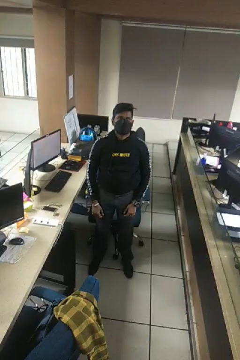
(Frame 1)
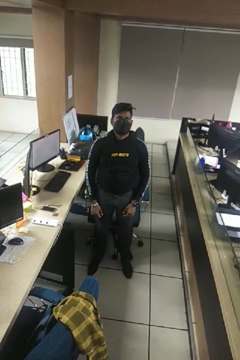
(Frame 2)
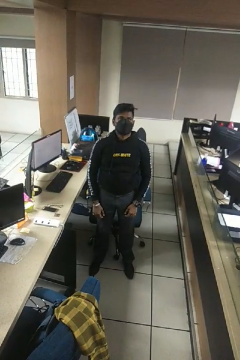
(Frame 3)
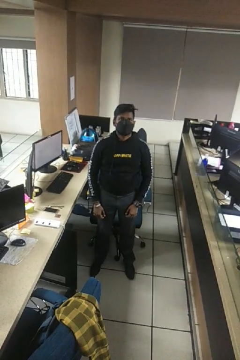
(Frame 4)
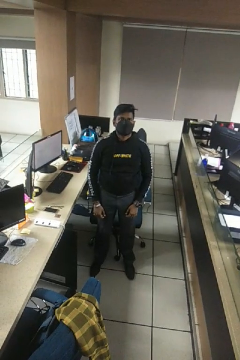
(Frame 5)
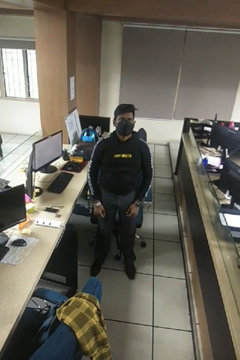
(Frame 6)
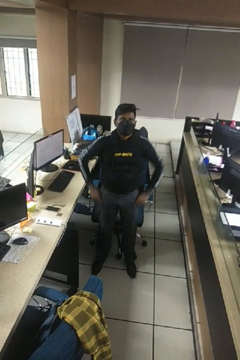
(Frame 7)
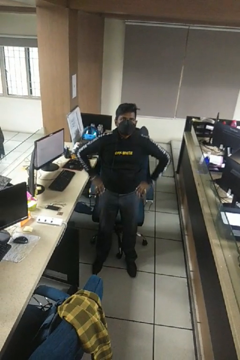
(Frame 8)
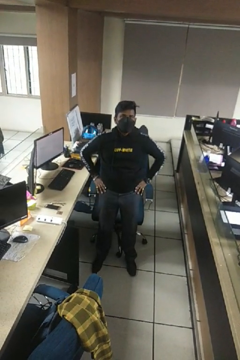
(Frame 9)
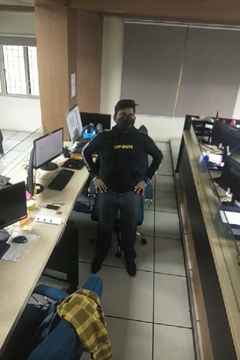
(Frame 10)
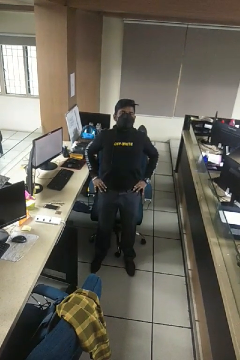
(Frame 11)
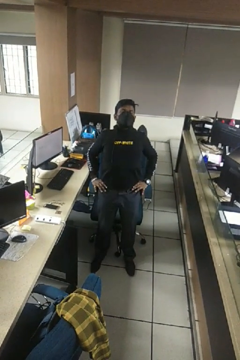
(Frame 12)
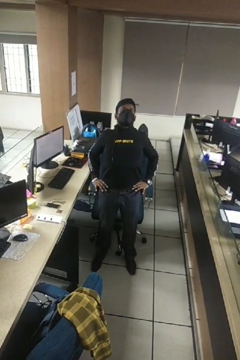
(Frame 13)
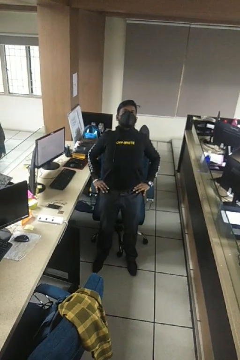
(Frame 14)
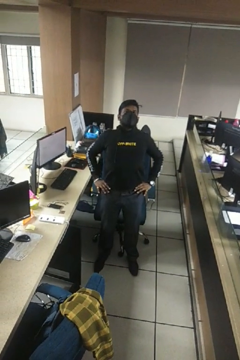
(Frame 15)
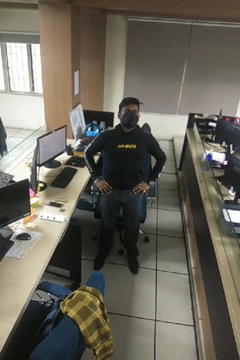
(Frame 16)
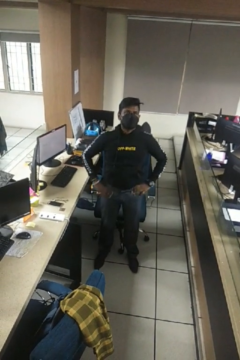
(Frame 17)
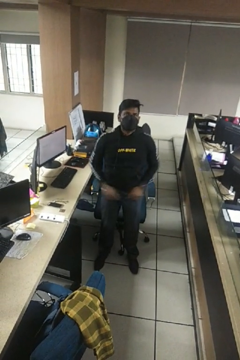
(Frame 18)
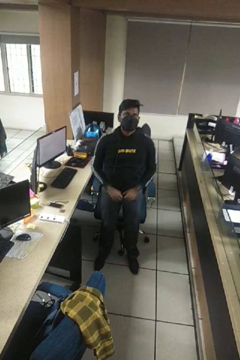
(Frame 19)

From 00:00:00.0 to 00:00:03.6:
person stretches back

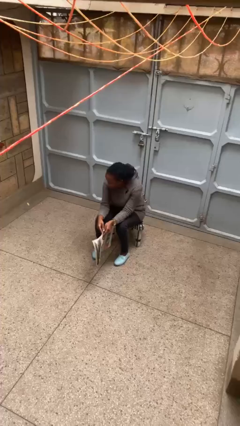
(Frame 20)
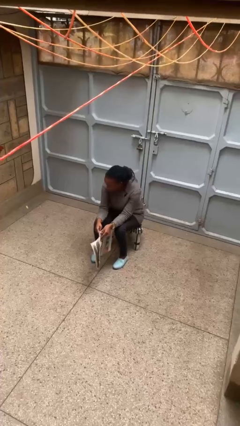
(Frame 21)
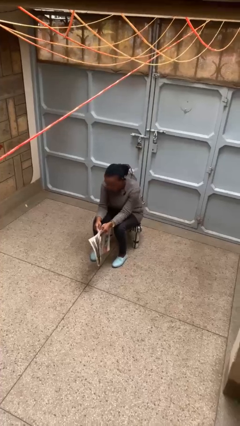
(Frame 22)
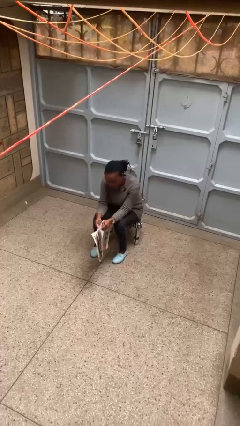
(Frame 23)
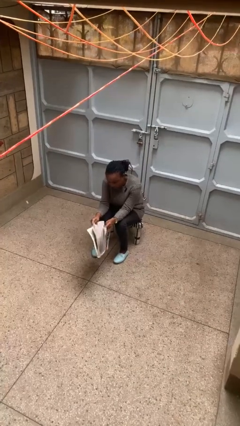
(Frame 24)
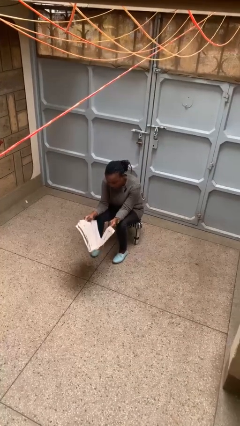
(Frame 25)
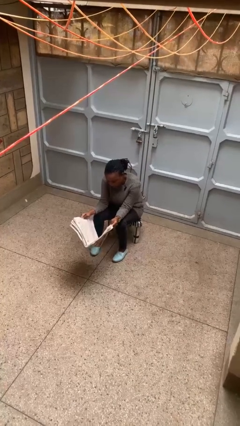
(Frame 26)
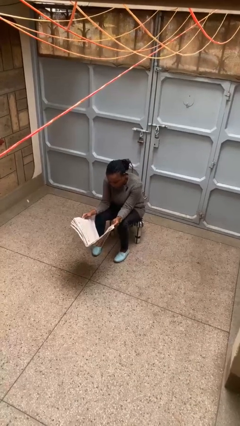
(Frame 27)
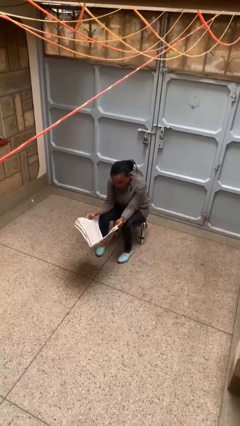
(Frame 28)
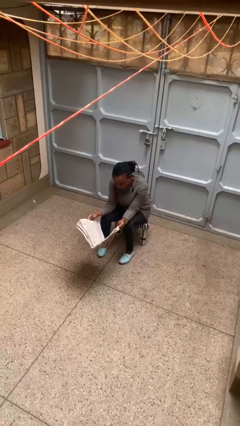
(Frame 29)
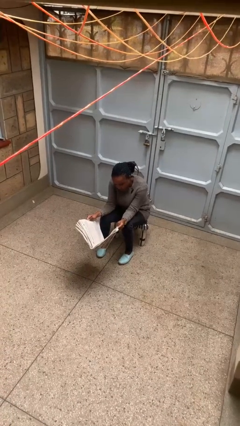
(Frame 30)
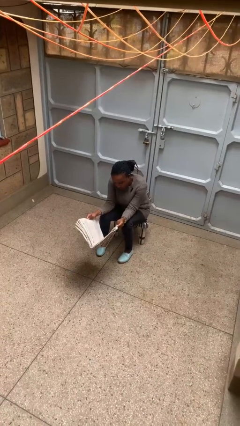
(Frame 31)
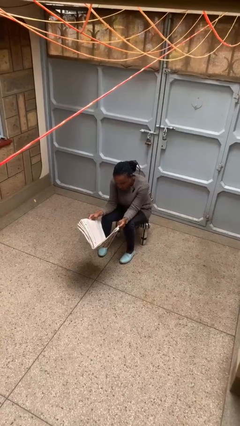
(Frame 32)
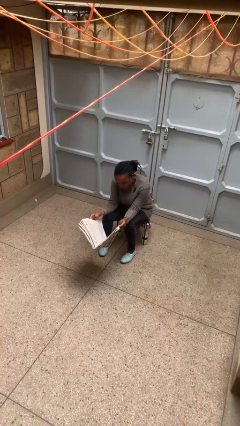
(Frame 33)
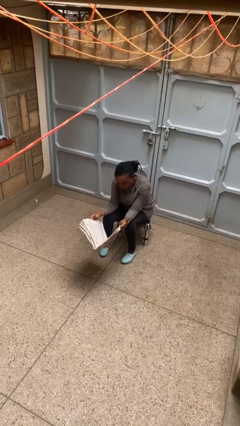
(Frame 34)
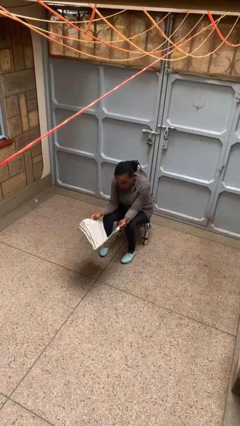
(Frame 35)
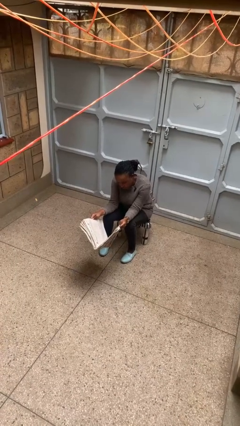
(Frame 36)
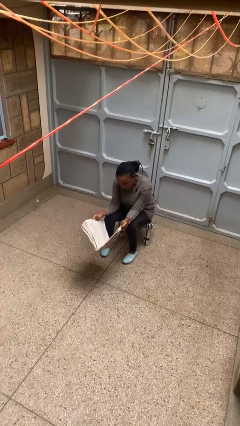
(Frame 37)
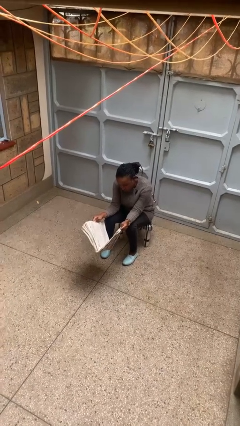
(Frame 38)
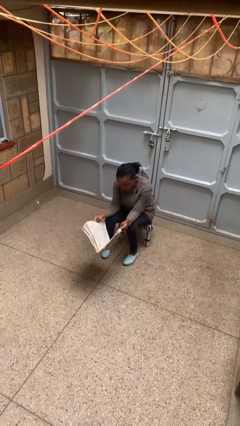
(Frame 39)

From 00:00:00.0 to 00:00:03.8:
person reads newspaper

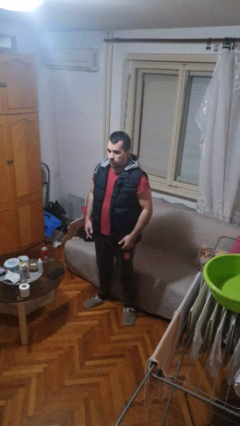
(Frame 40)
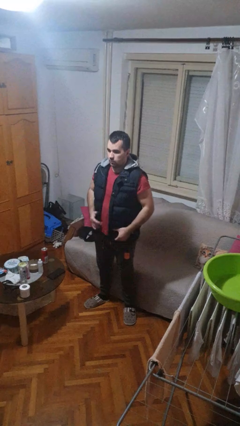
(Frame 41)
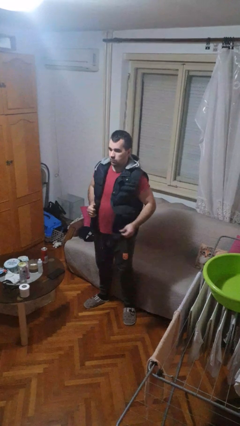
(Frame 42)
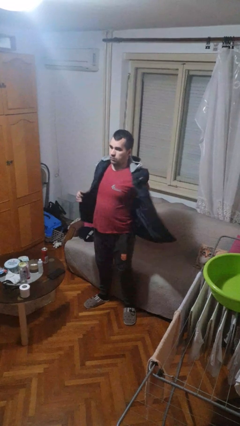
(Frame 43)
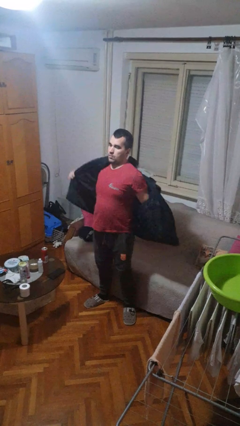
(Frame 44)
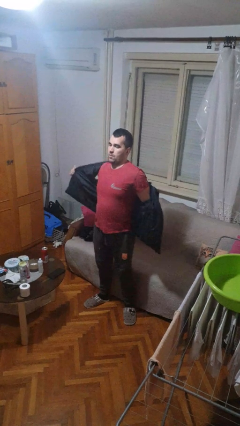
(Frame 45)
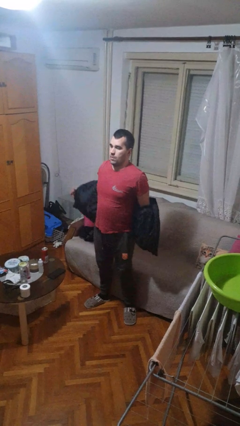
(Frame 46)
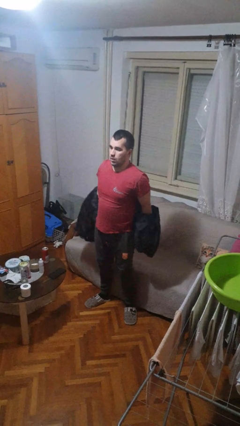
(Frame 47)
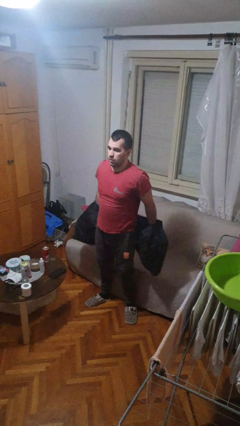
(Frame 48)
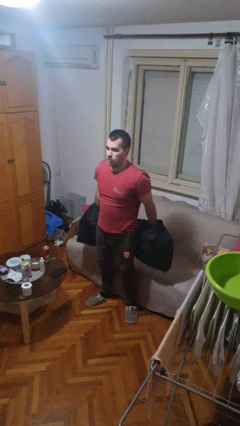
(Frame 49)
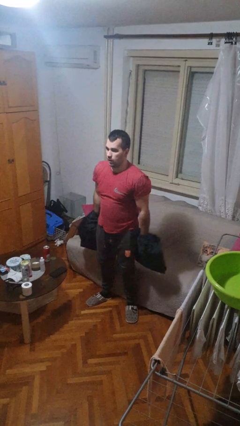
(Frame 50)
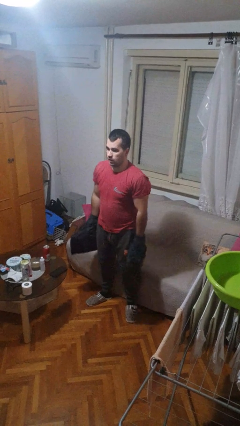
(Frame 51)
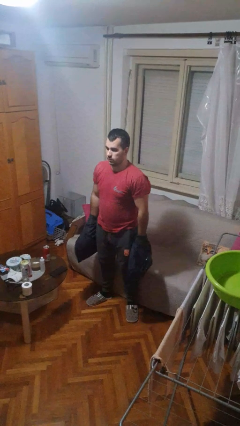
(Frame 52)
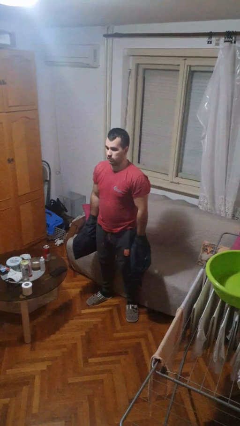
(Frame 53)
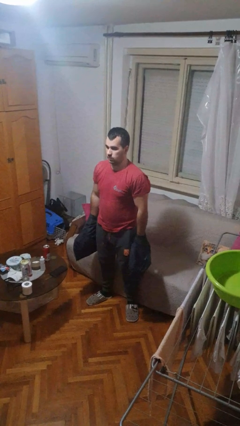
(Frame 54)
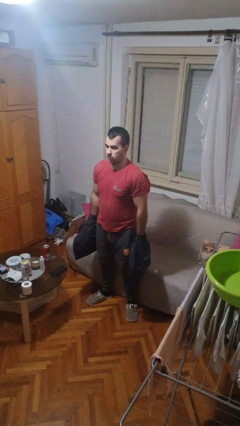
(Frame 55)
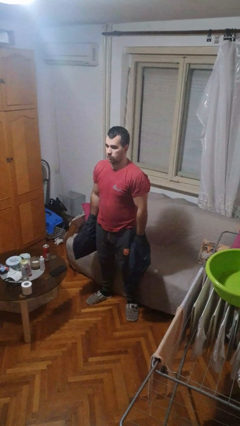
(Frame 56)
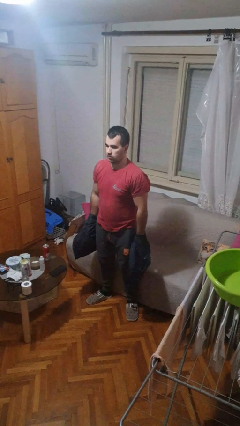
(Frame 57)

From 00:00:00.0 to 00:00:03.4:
person takes off jacket

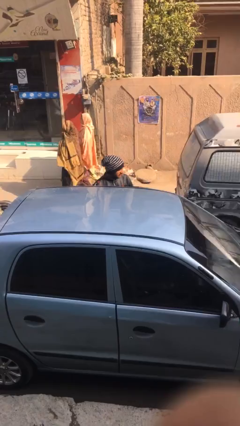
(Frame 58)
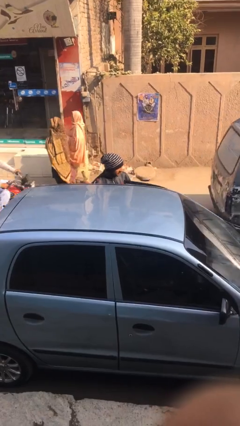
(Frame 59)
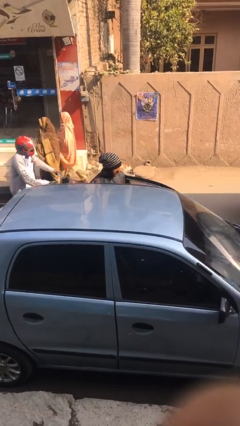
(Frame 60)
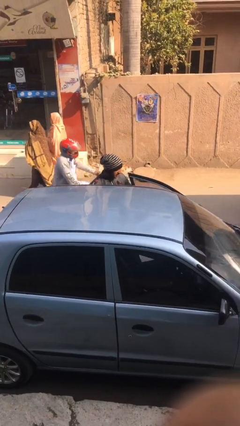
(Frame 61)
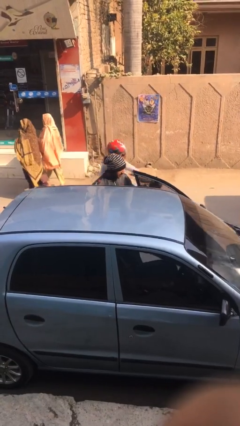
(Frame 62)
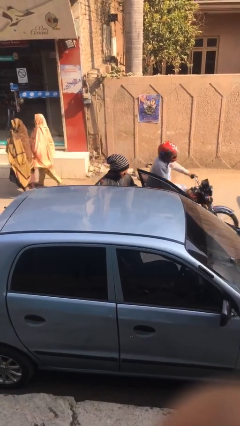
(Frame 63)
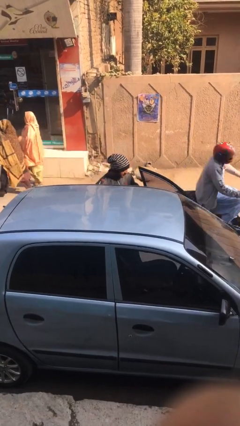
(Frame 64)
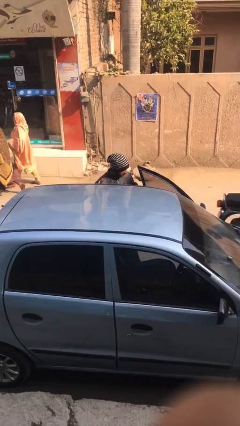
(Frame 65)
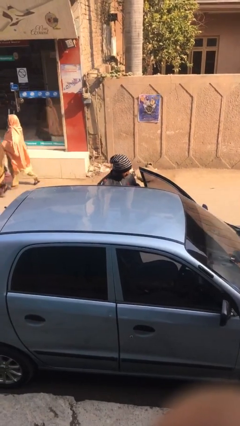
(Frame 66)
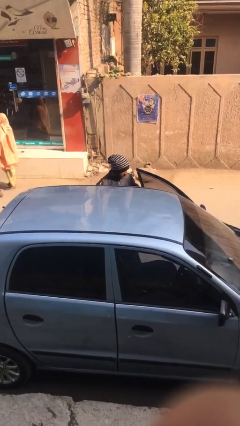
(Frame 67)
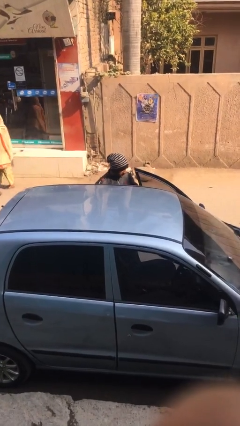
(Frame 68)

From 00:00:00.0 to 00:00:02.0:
person opens car door

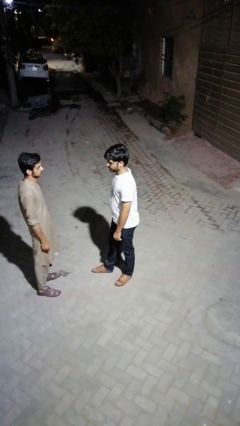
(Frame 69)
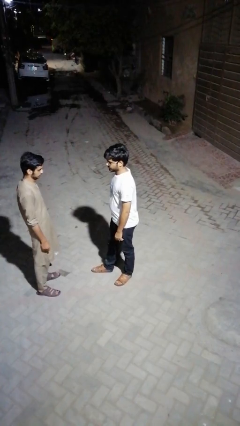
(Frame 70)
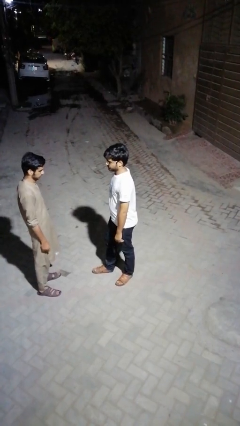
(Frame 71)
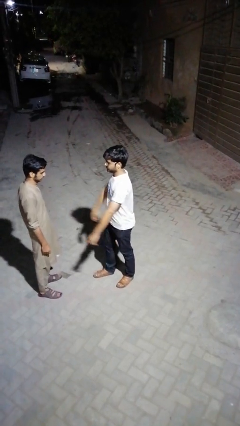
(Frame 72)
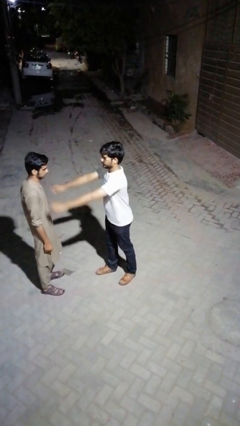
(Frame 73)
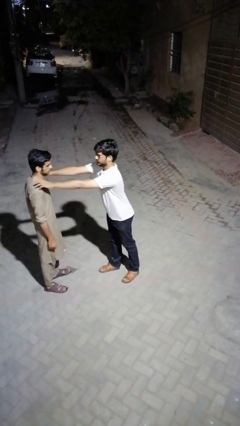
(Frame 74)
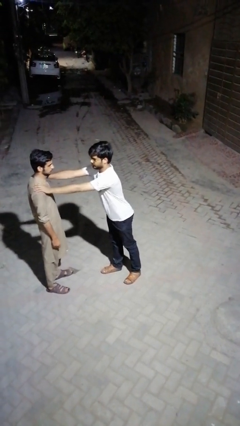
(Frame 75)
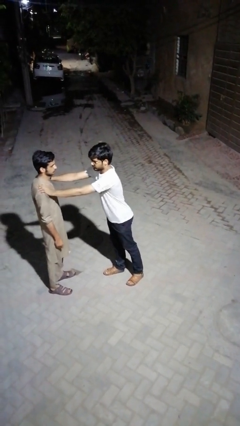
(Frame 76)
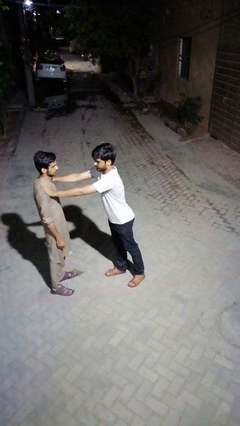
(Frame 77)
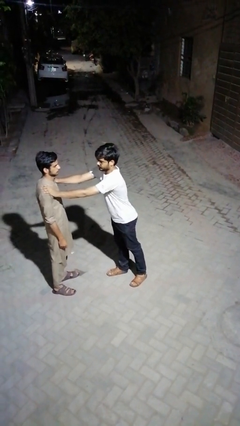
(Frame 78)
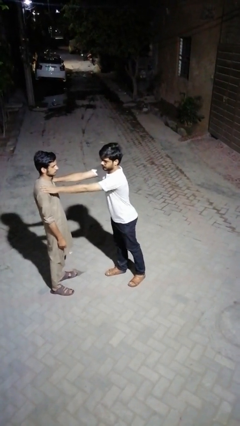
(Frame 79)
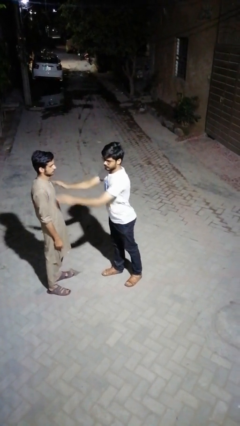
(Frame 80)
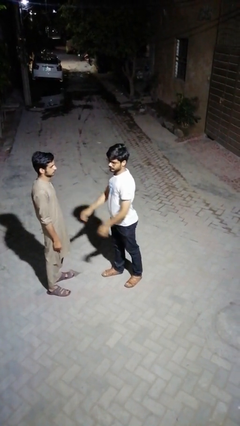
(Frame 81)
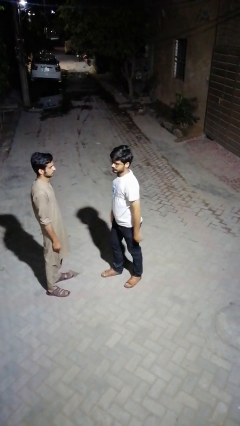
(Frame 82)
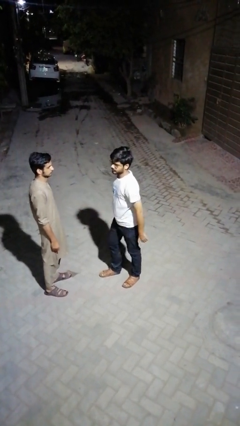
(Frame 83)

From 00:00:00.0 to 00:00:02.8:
person pounds shoulders of person

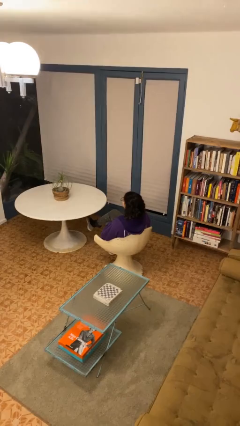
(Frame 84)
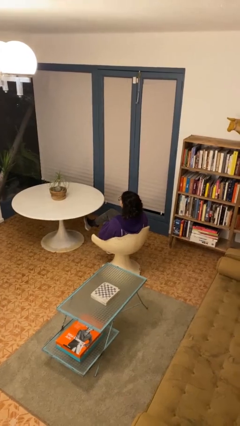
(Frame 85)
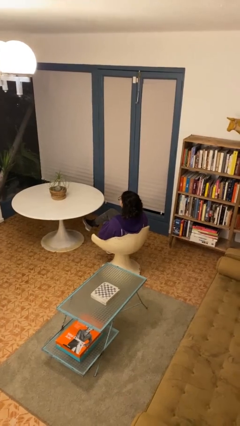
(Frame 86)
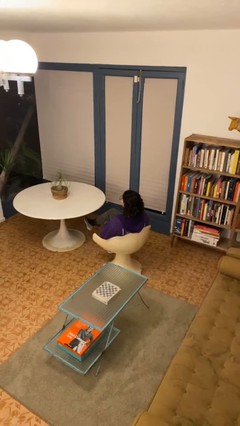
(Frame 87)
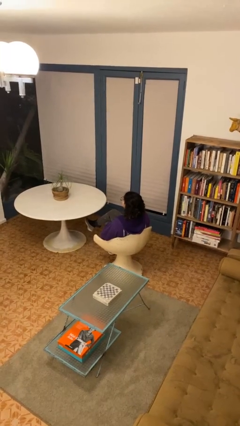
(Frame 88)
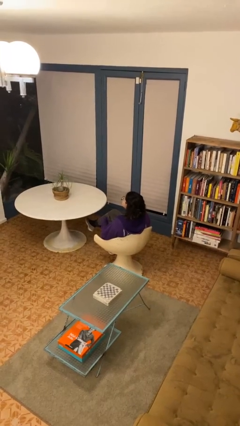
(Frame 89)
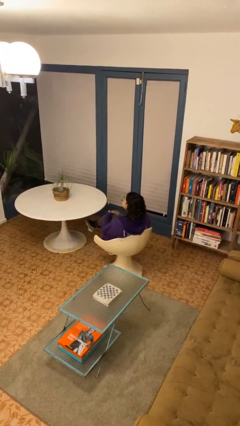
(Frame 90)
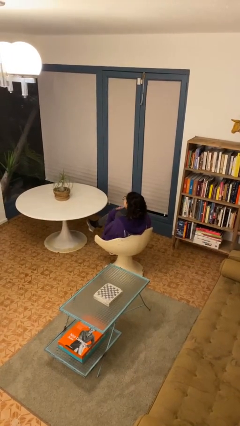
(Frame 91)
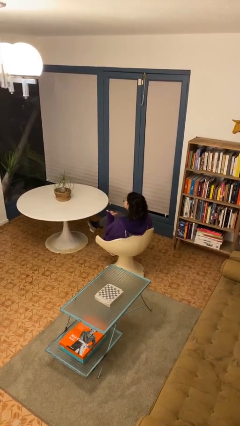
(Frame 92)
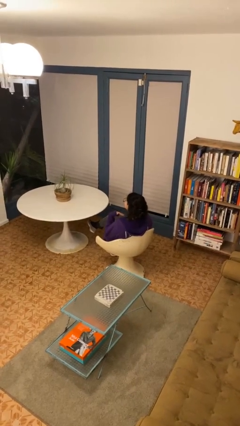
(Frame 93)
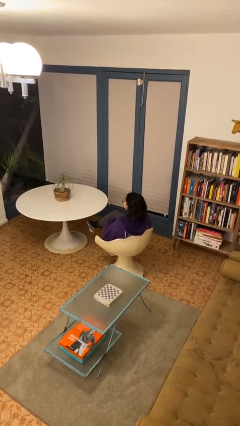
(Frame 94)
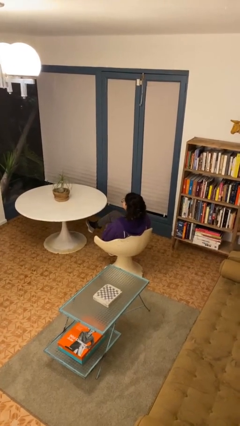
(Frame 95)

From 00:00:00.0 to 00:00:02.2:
person gestures cut

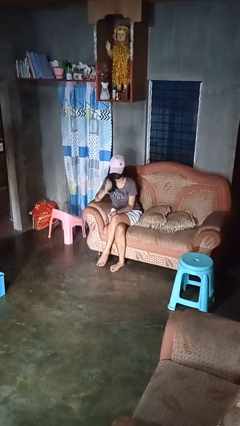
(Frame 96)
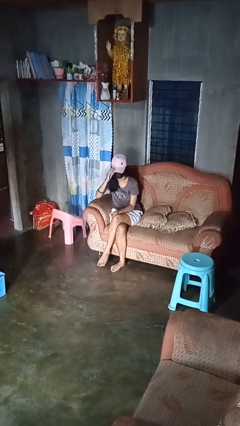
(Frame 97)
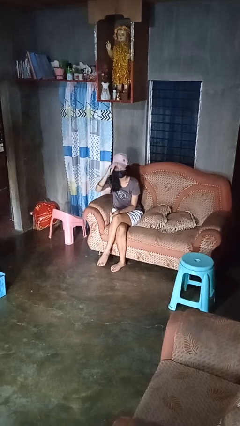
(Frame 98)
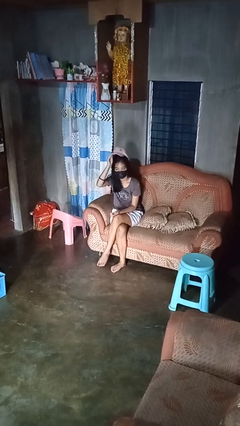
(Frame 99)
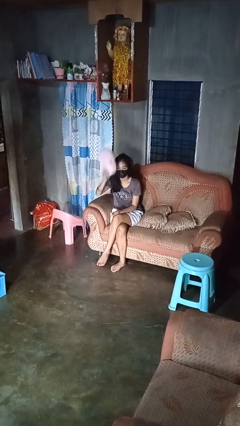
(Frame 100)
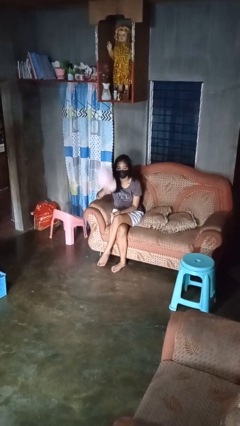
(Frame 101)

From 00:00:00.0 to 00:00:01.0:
person takes off hat
